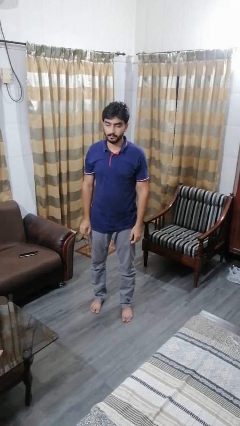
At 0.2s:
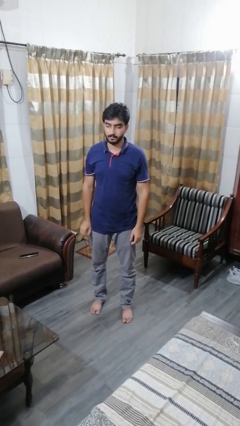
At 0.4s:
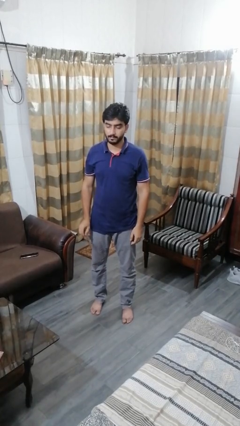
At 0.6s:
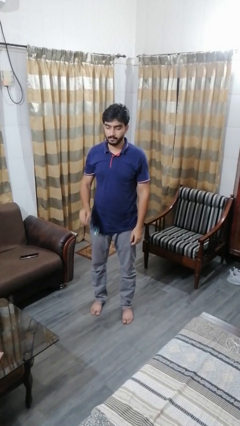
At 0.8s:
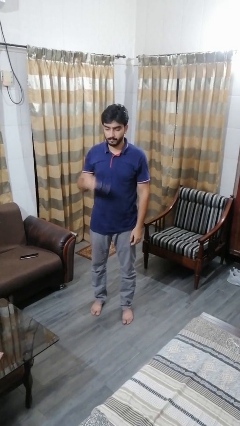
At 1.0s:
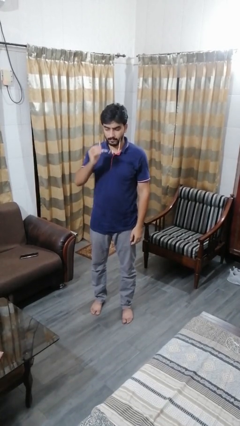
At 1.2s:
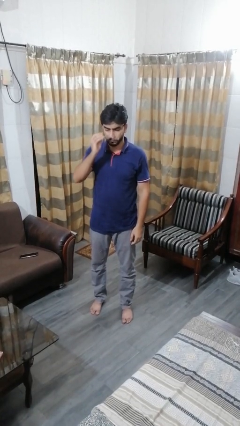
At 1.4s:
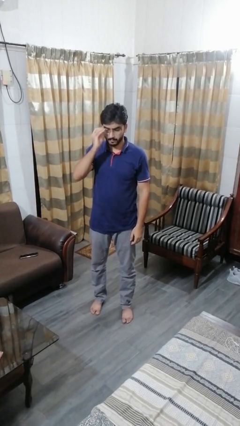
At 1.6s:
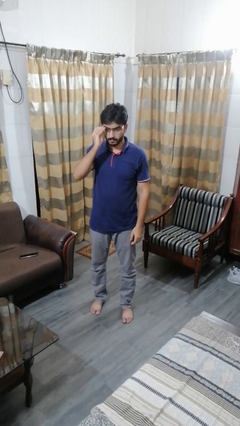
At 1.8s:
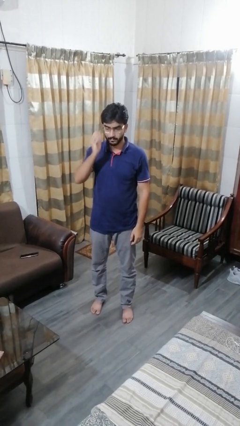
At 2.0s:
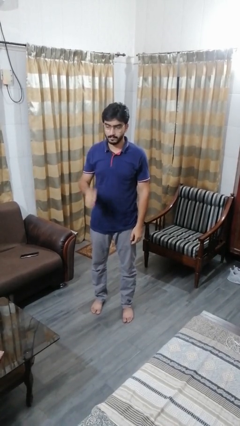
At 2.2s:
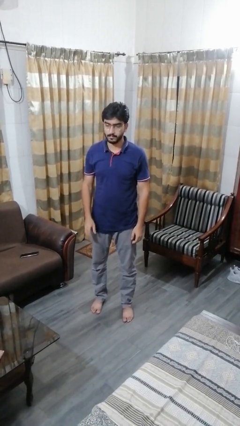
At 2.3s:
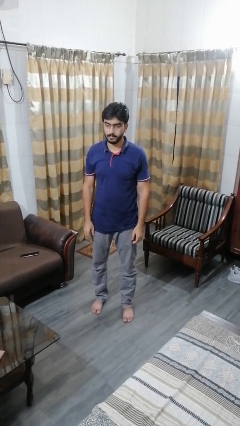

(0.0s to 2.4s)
person puts on glasses

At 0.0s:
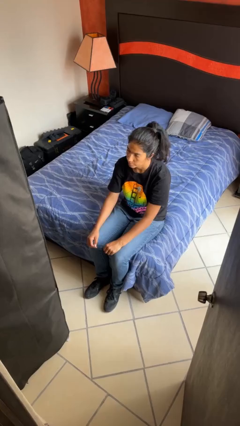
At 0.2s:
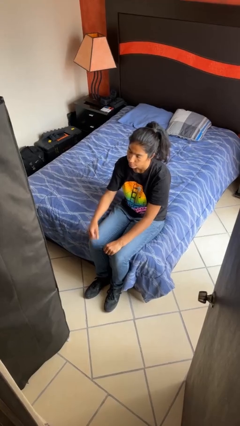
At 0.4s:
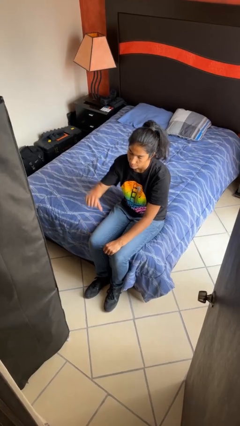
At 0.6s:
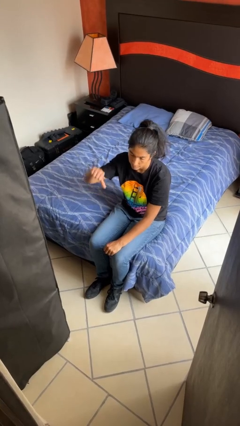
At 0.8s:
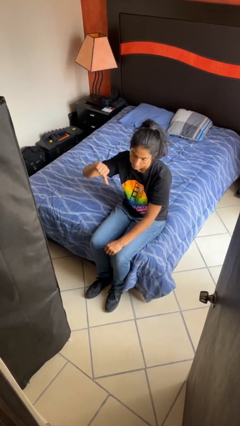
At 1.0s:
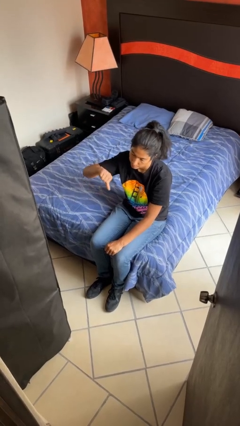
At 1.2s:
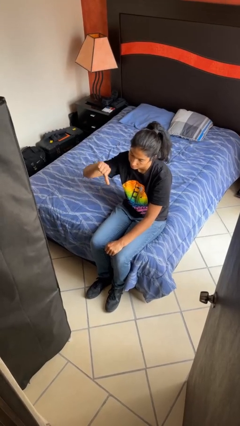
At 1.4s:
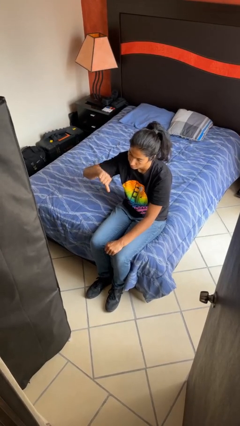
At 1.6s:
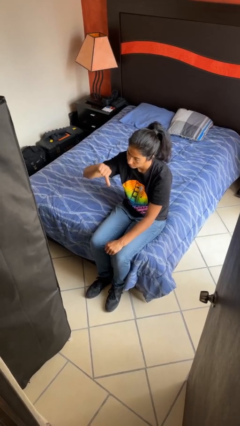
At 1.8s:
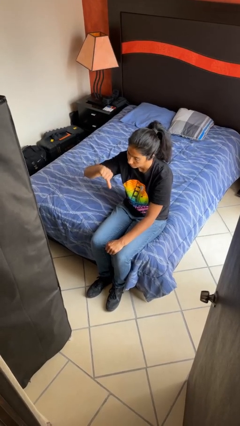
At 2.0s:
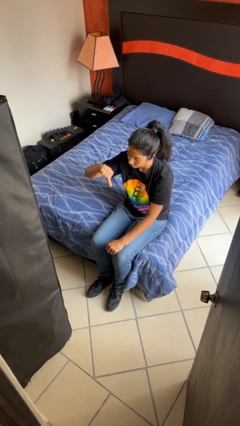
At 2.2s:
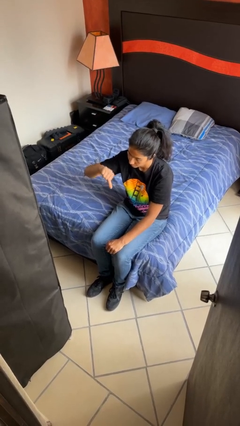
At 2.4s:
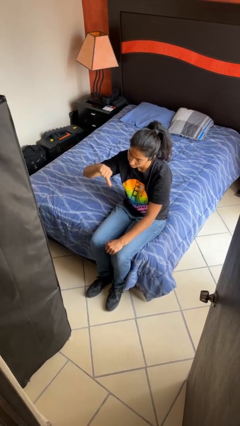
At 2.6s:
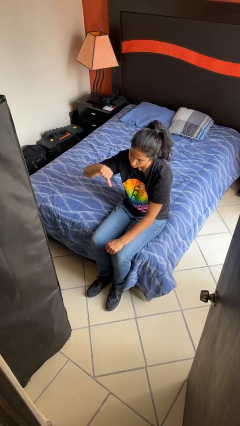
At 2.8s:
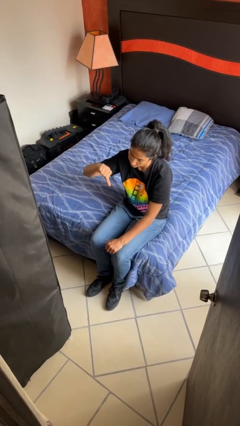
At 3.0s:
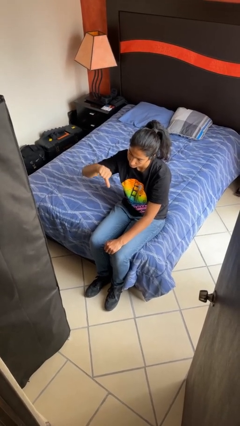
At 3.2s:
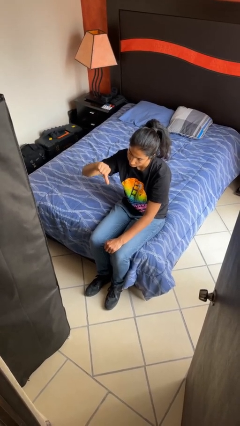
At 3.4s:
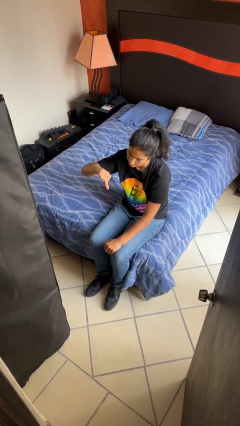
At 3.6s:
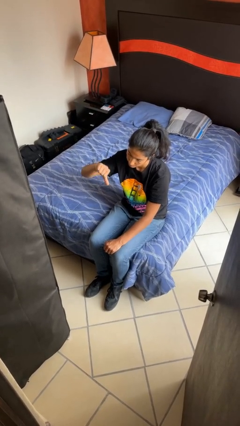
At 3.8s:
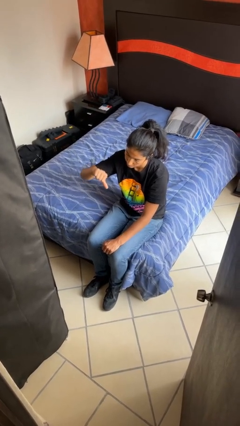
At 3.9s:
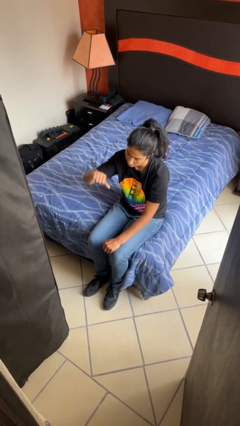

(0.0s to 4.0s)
person gestures thumbs down

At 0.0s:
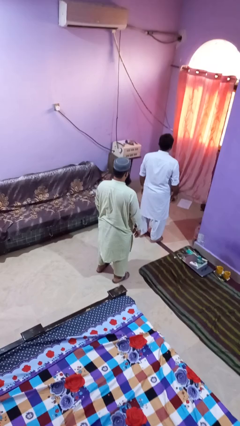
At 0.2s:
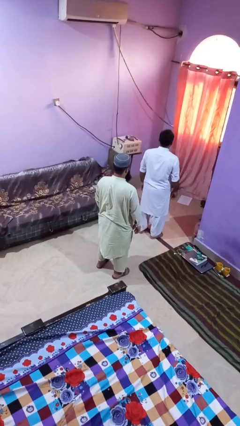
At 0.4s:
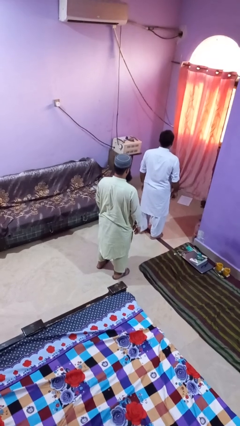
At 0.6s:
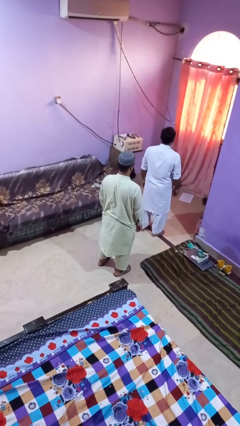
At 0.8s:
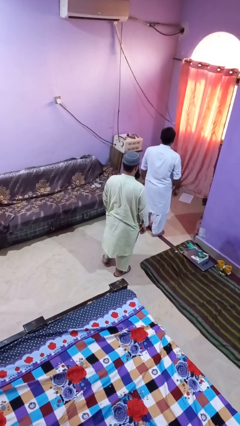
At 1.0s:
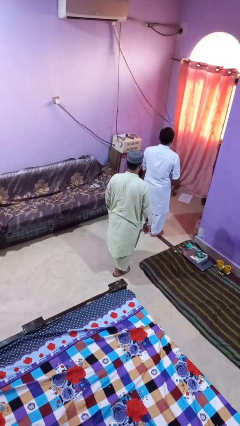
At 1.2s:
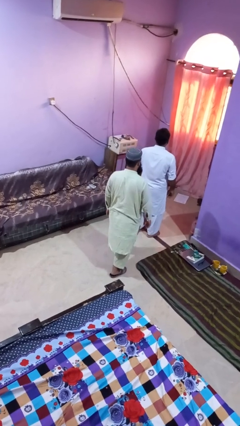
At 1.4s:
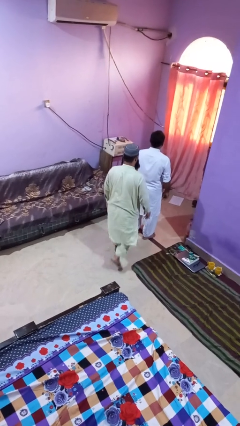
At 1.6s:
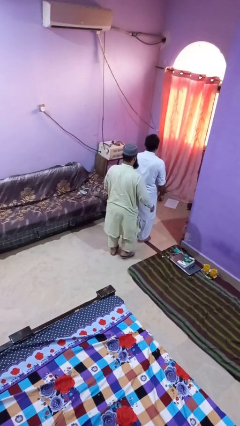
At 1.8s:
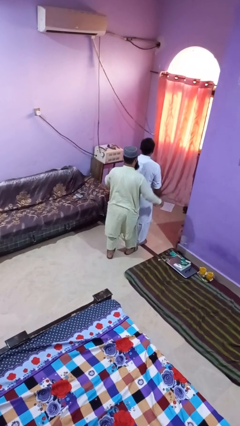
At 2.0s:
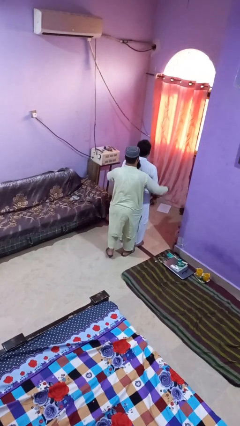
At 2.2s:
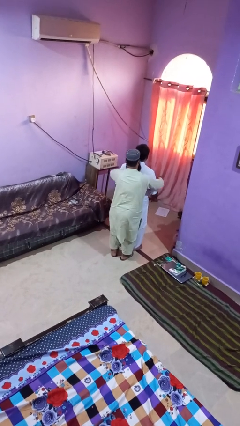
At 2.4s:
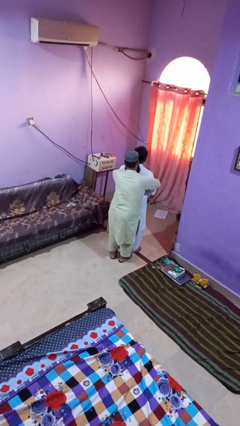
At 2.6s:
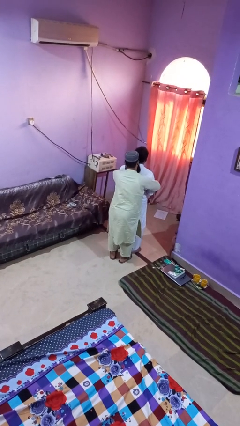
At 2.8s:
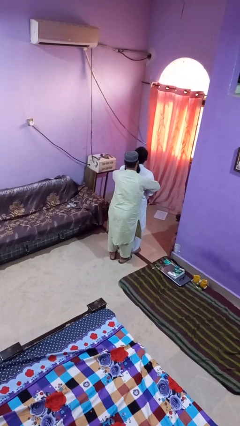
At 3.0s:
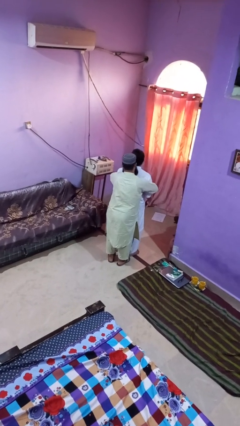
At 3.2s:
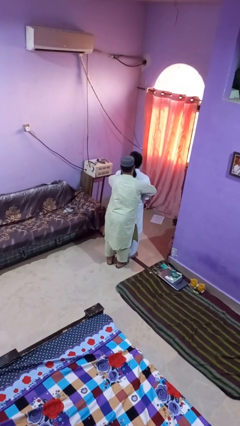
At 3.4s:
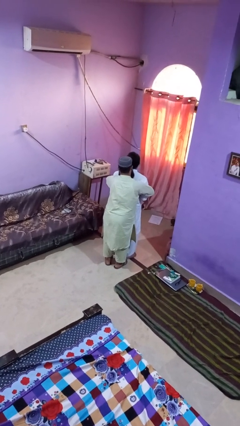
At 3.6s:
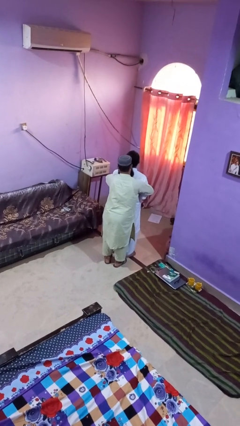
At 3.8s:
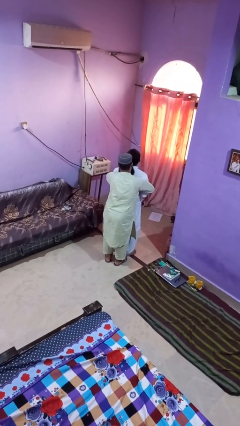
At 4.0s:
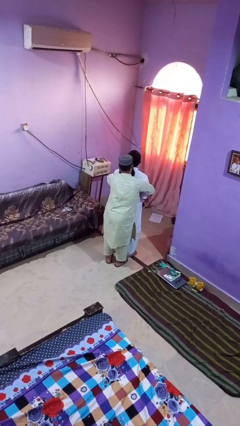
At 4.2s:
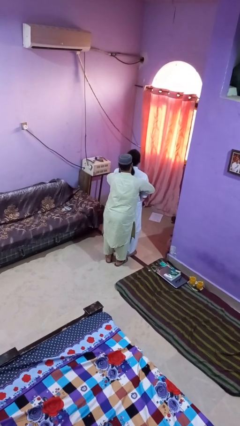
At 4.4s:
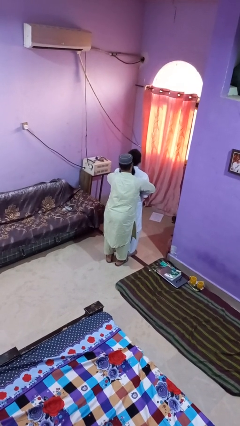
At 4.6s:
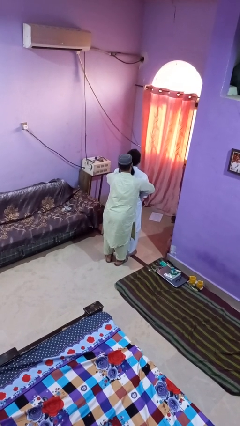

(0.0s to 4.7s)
person hugs person from behind

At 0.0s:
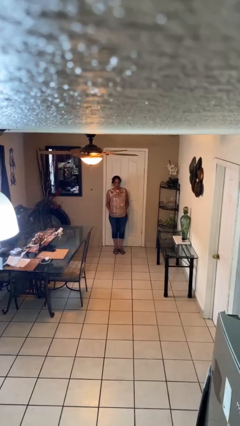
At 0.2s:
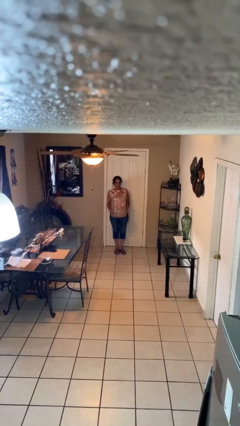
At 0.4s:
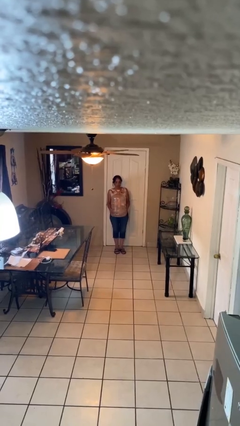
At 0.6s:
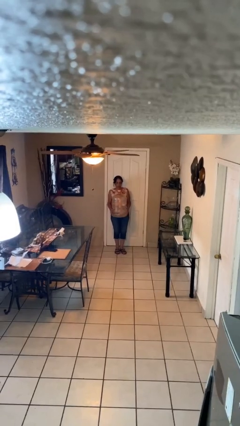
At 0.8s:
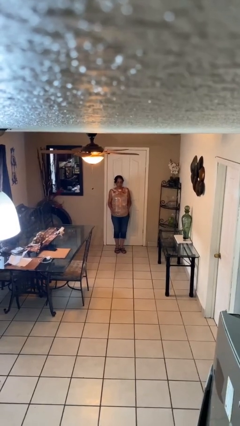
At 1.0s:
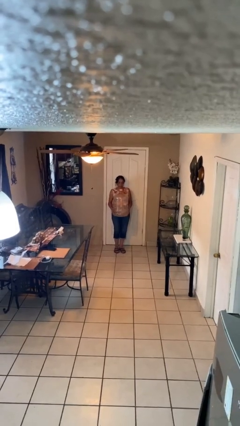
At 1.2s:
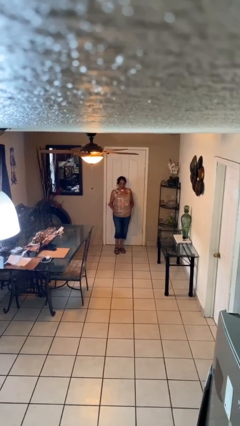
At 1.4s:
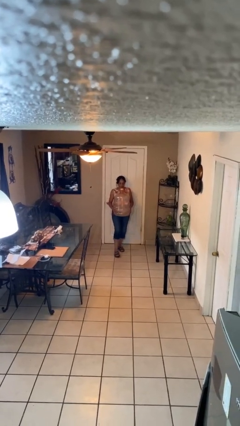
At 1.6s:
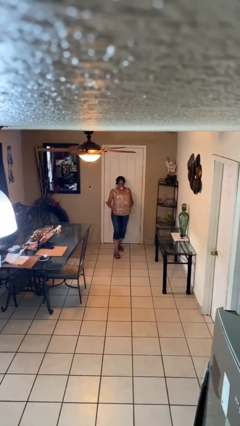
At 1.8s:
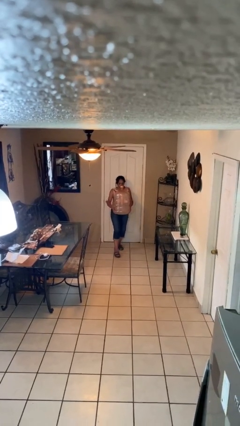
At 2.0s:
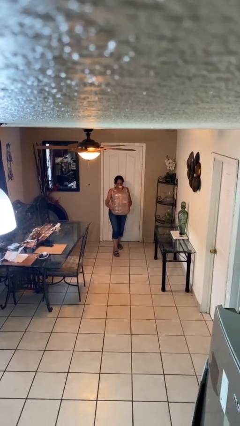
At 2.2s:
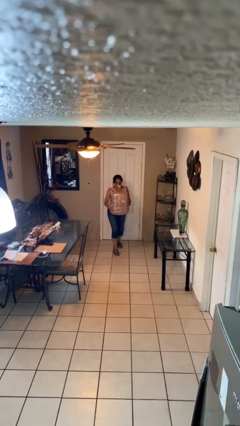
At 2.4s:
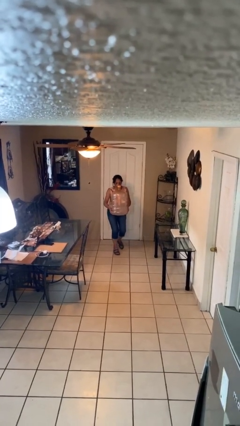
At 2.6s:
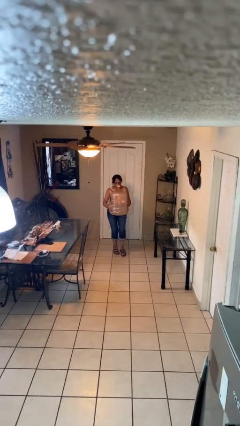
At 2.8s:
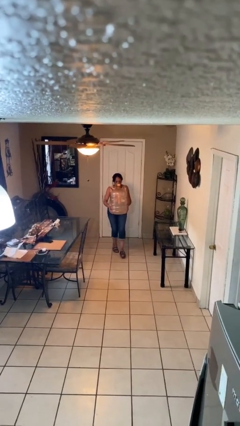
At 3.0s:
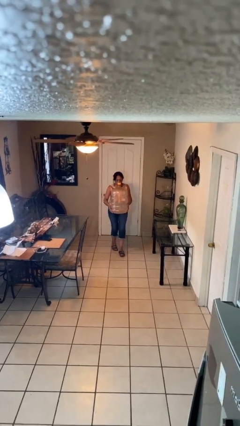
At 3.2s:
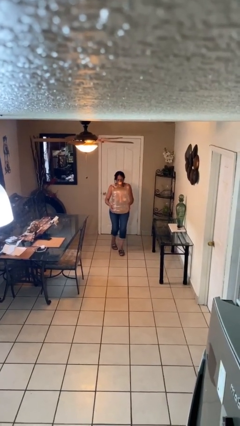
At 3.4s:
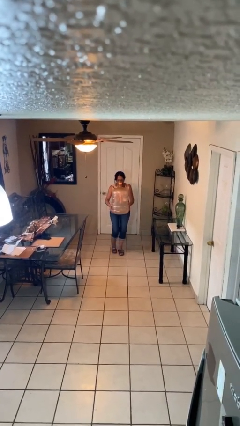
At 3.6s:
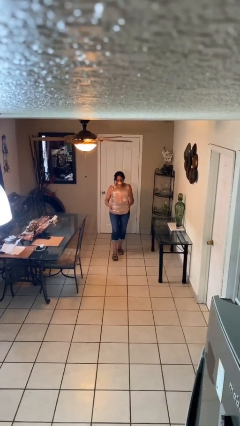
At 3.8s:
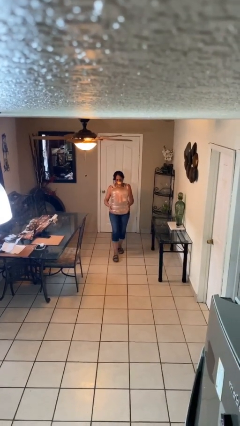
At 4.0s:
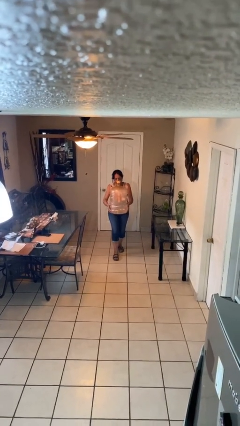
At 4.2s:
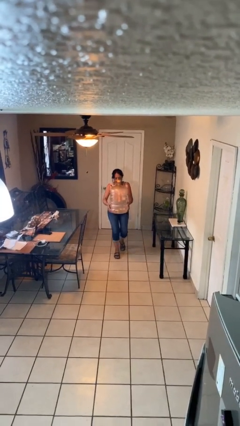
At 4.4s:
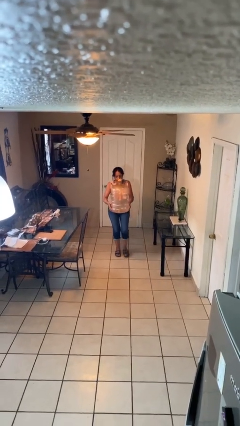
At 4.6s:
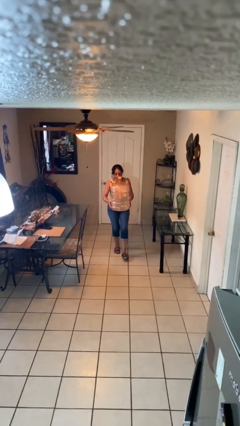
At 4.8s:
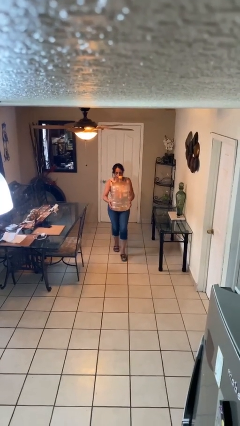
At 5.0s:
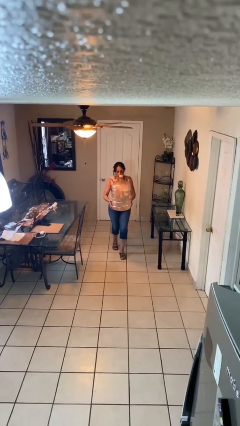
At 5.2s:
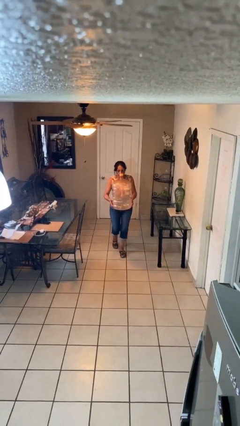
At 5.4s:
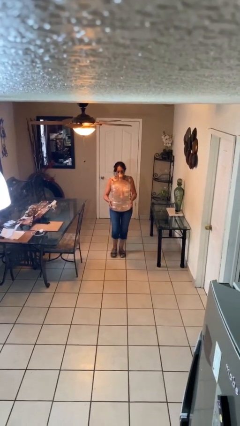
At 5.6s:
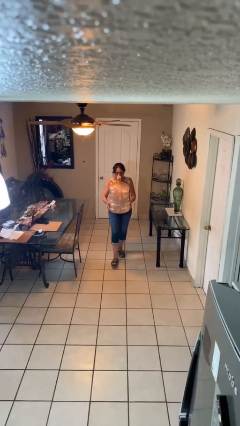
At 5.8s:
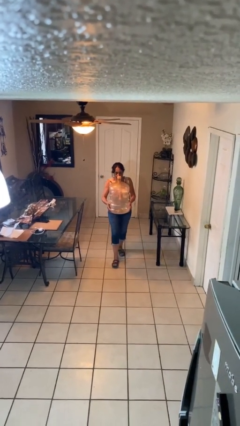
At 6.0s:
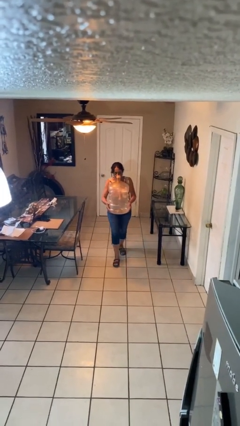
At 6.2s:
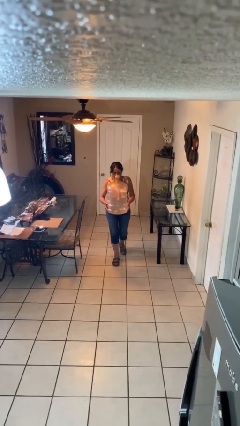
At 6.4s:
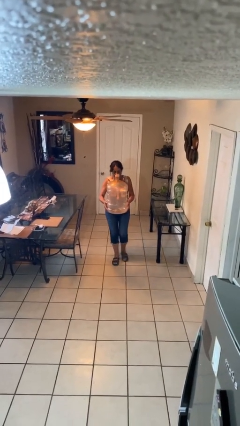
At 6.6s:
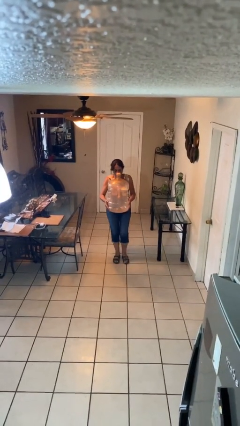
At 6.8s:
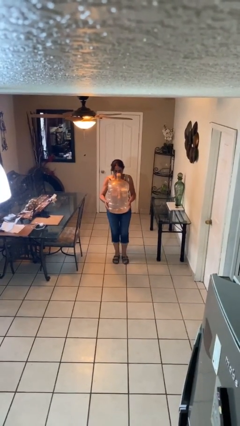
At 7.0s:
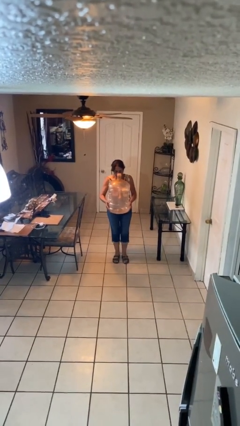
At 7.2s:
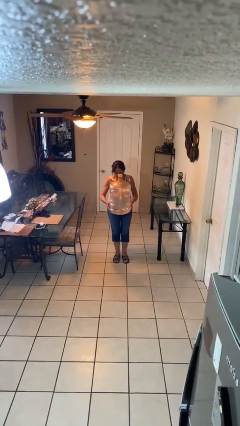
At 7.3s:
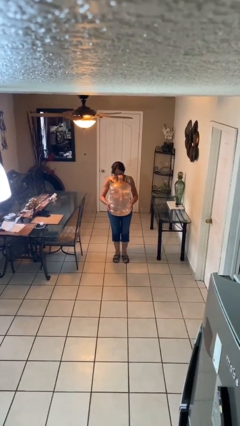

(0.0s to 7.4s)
person carries heavy object
